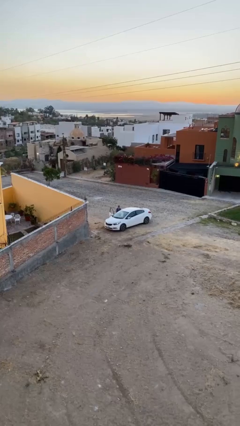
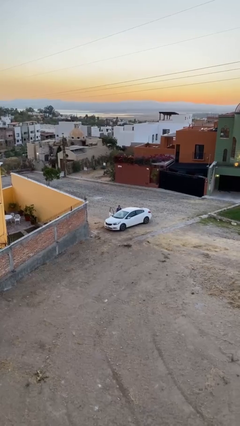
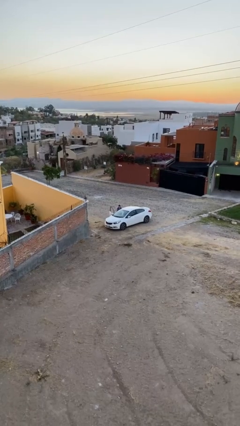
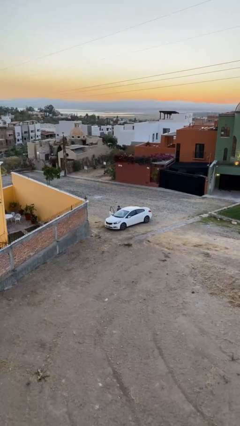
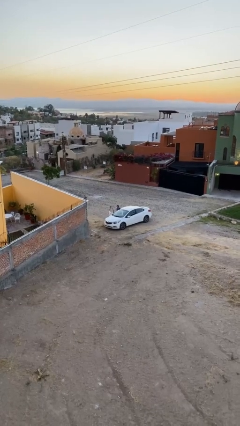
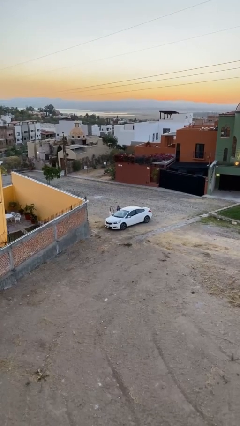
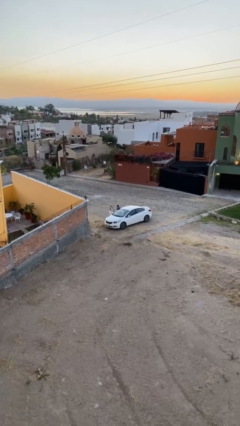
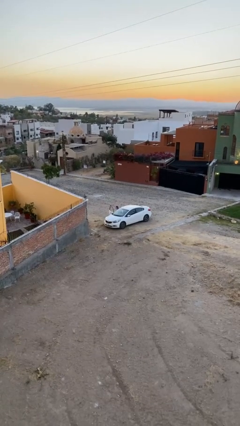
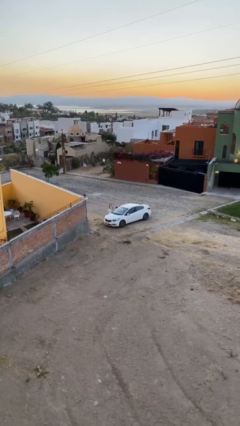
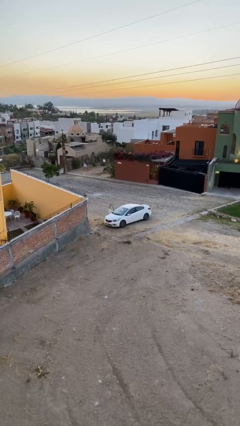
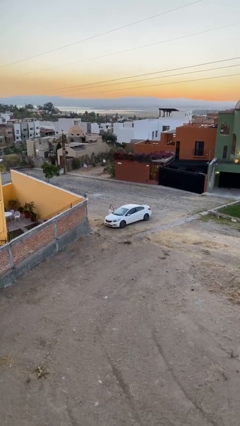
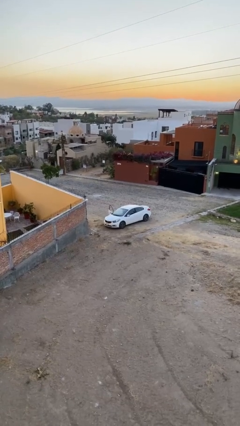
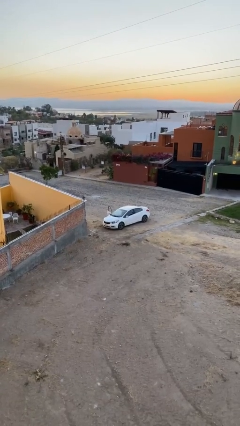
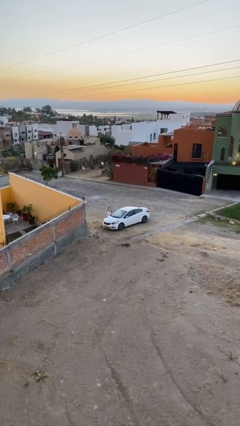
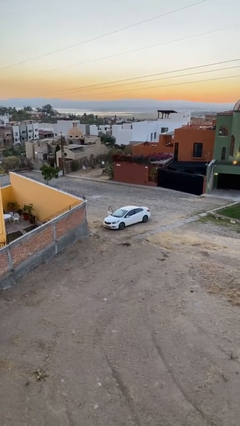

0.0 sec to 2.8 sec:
person enters car

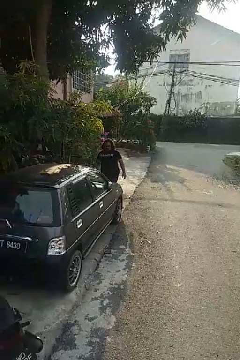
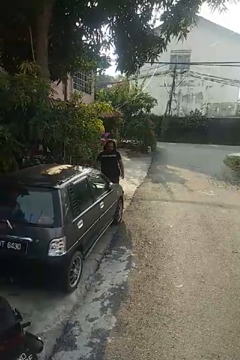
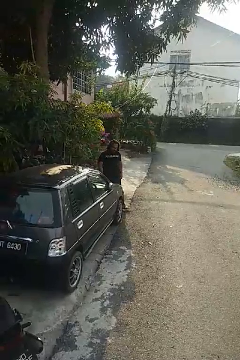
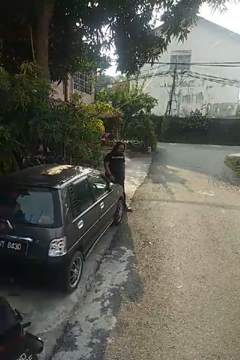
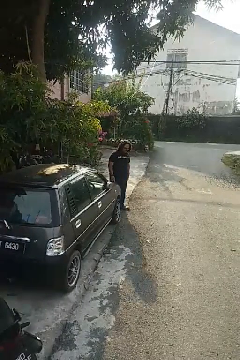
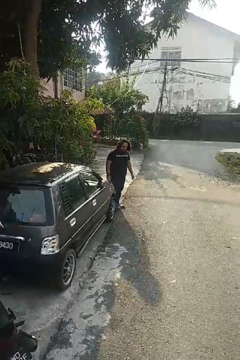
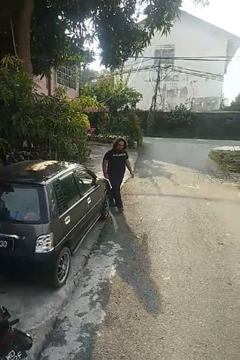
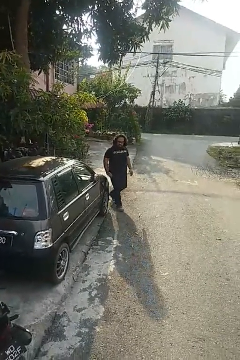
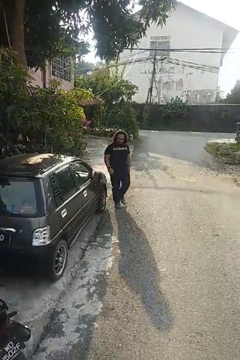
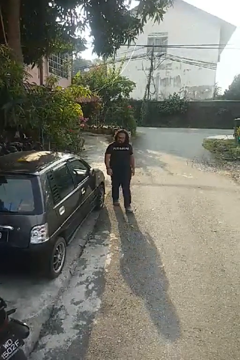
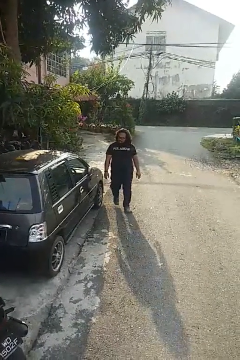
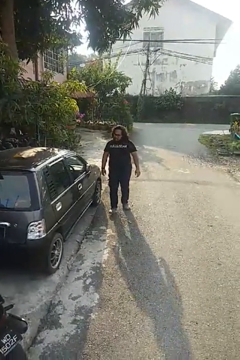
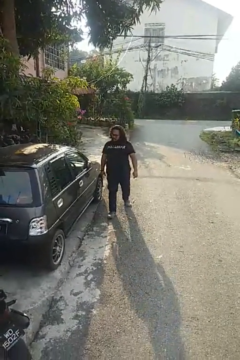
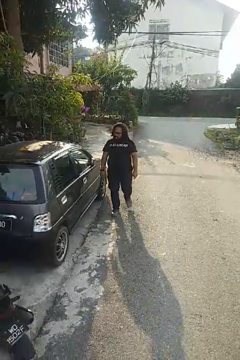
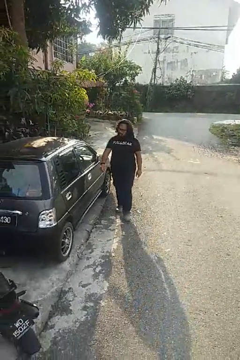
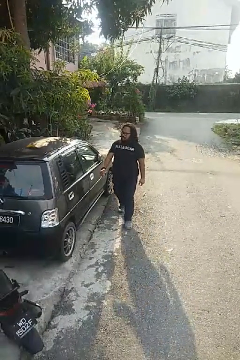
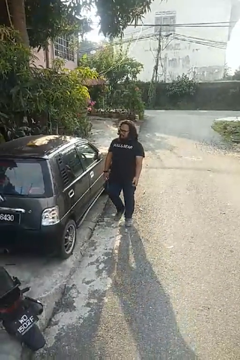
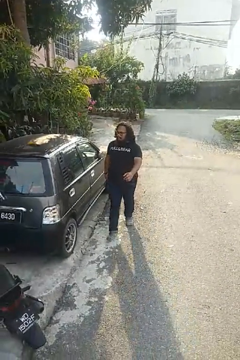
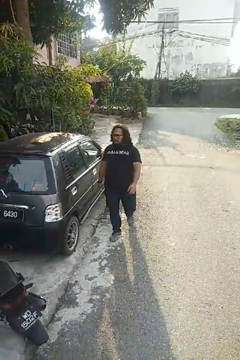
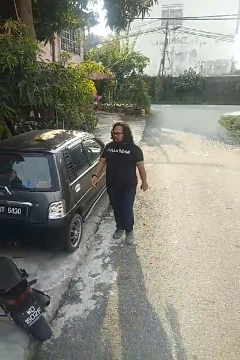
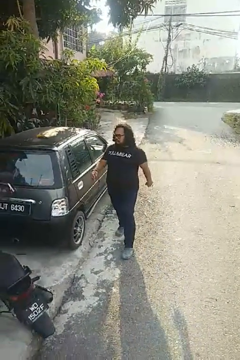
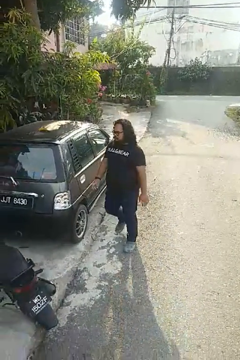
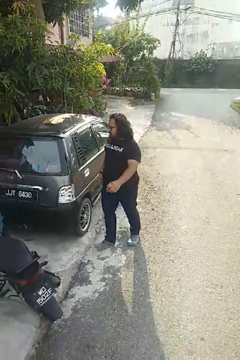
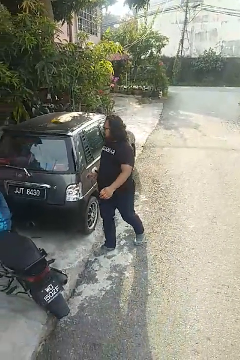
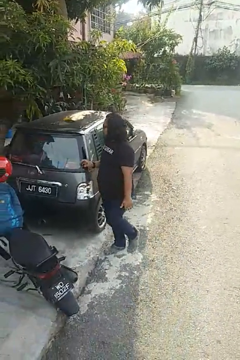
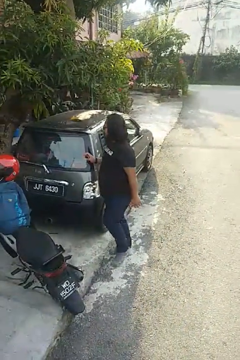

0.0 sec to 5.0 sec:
person walks around car

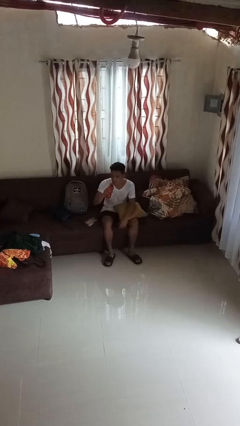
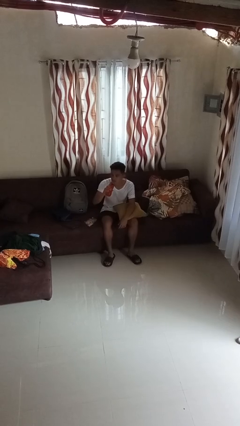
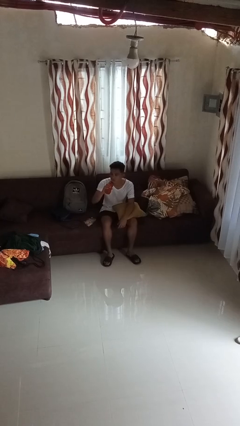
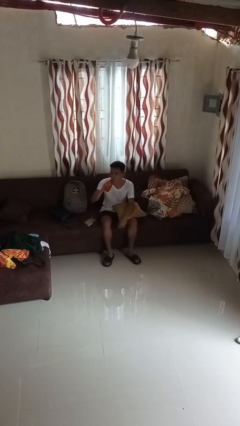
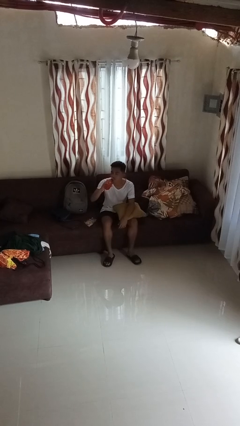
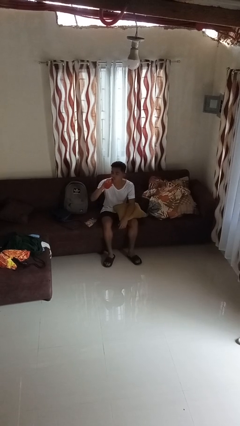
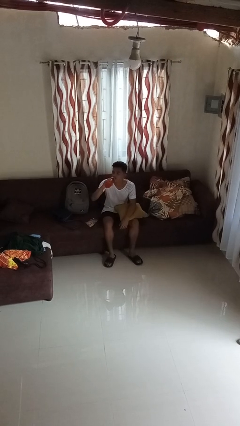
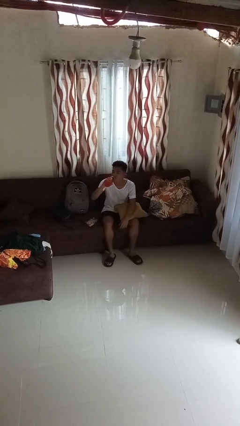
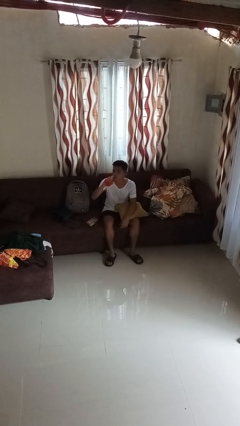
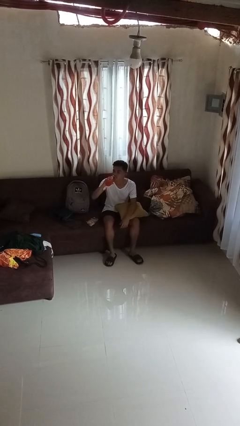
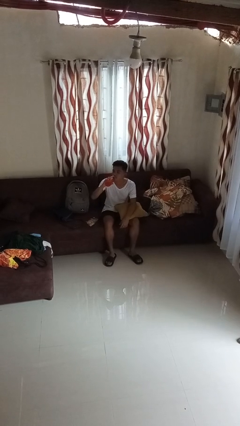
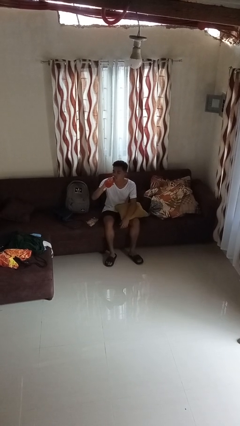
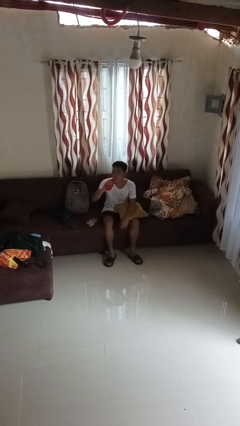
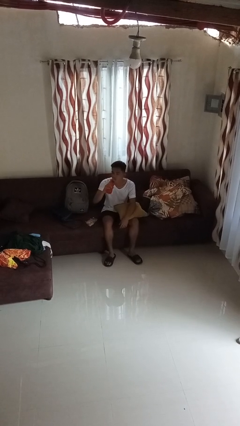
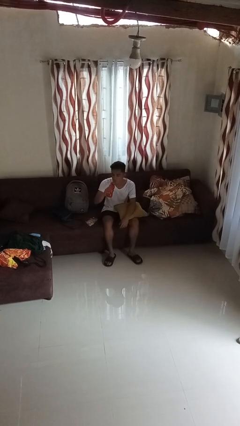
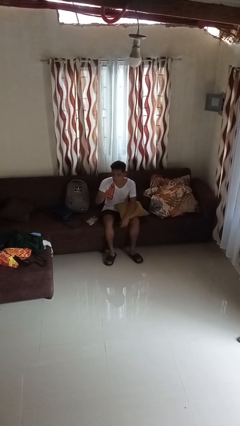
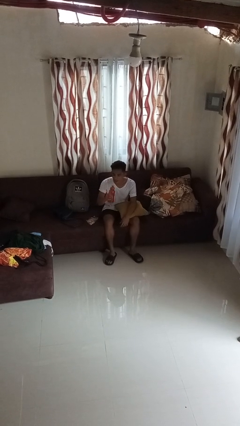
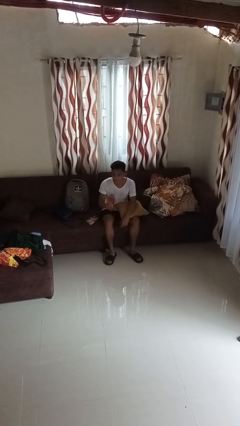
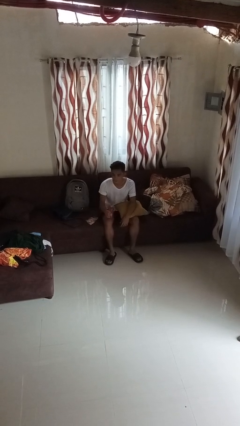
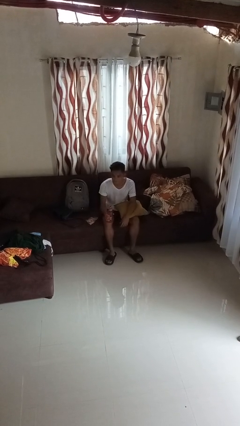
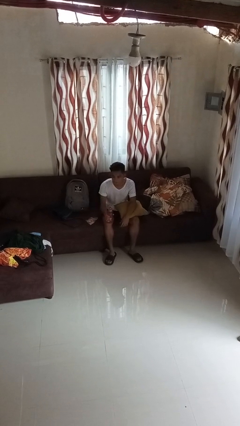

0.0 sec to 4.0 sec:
person drinks from bottle

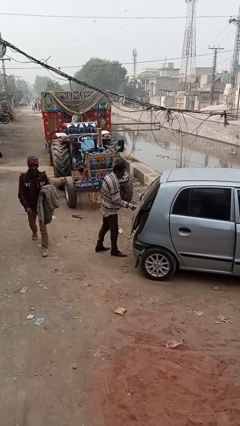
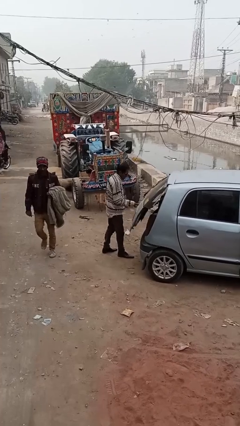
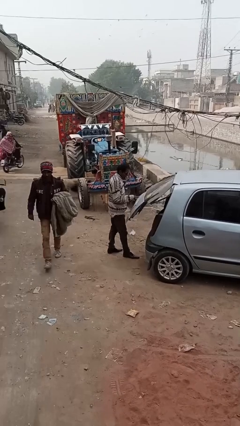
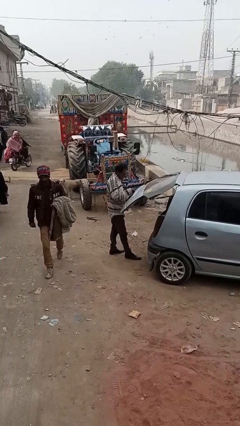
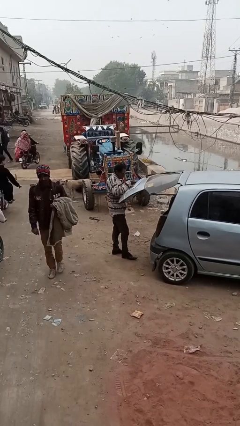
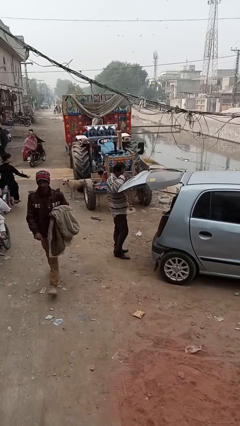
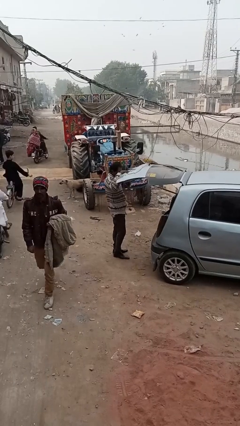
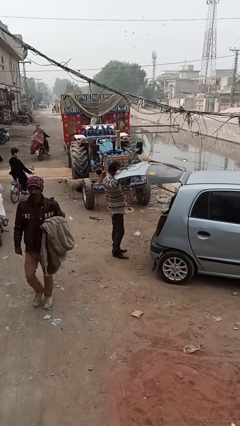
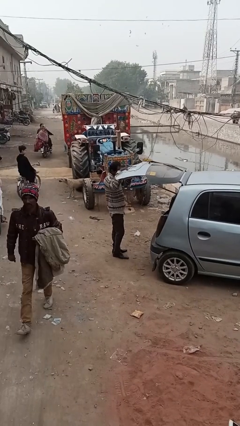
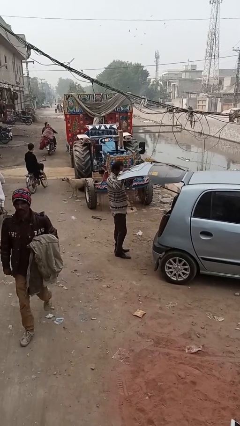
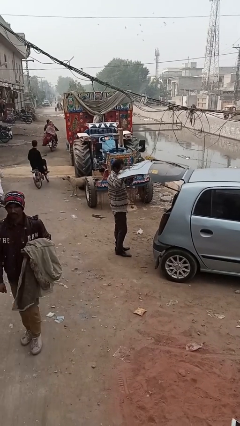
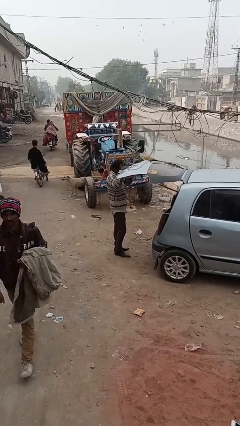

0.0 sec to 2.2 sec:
person opens car trunk

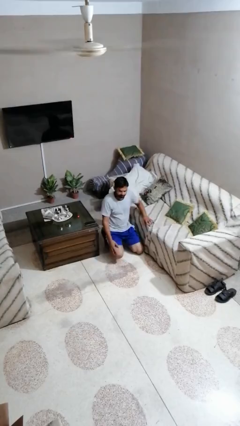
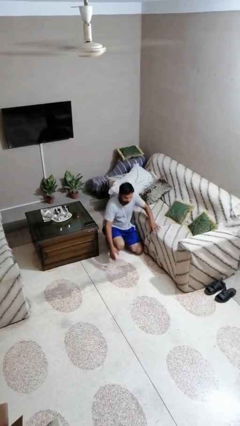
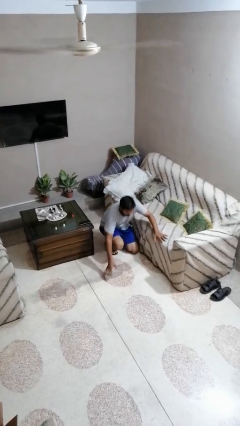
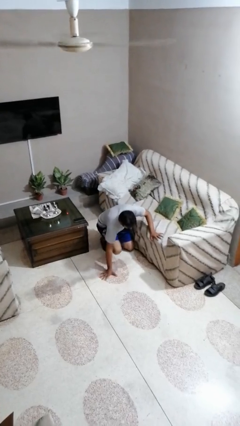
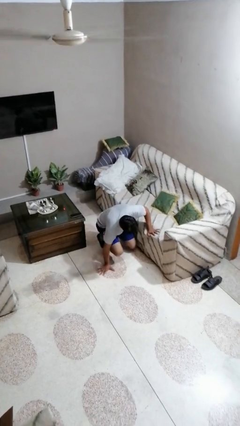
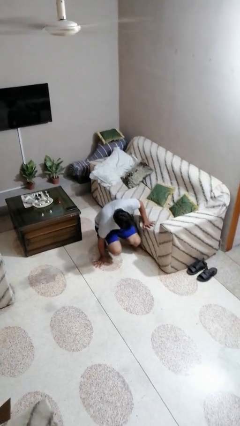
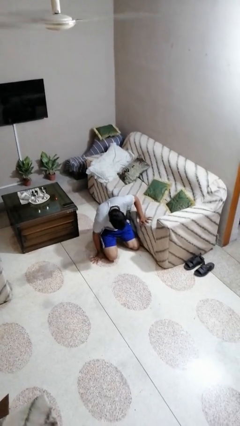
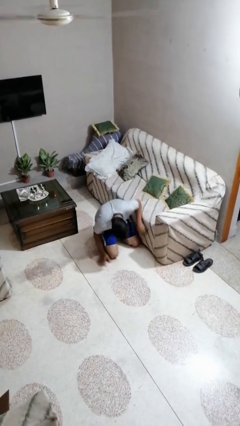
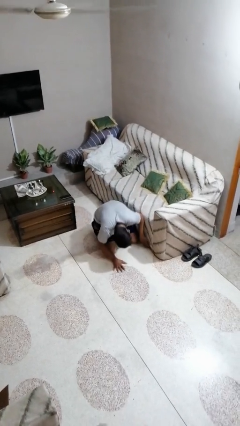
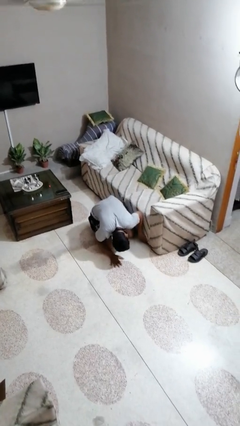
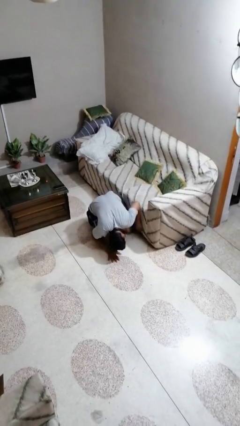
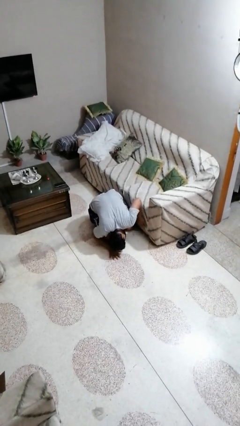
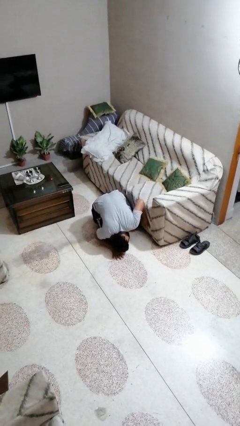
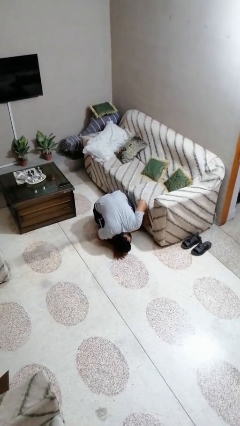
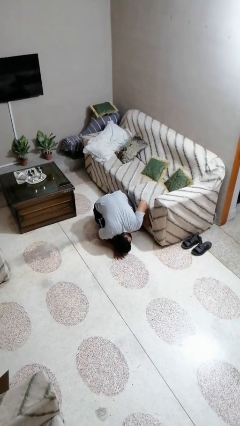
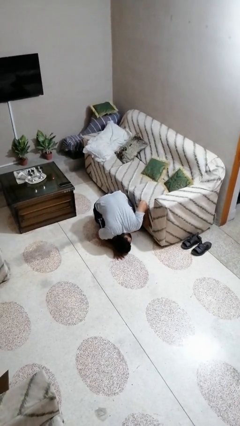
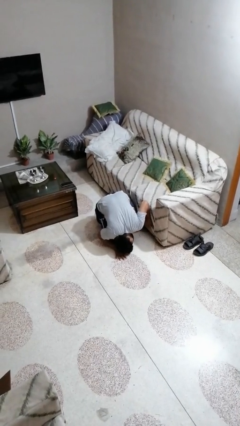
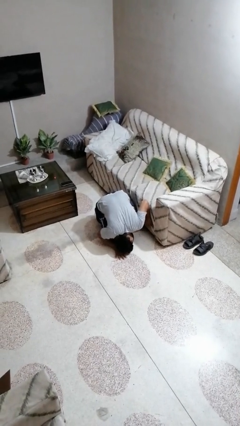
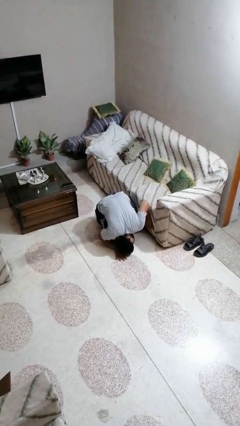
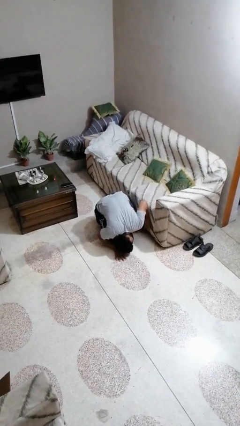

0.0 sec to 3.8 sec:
person searches under couch

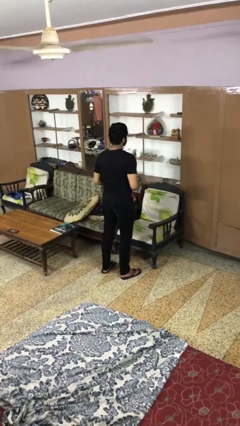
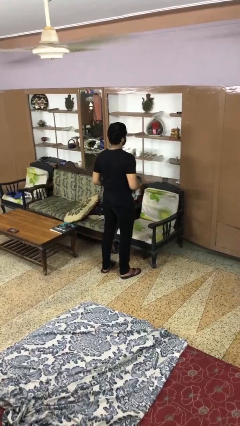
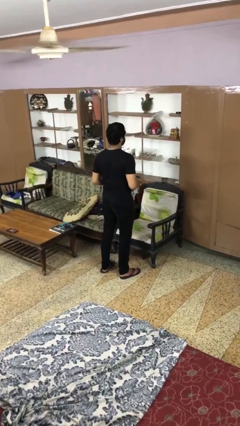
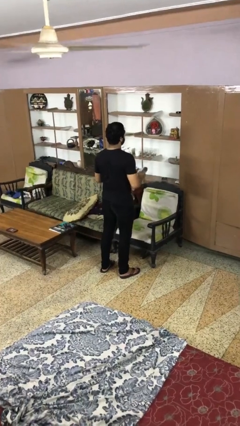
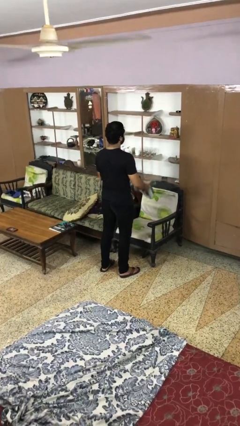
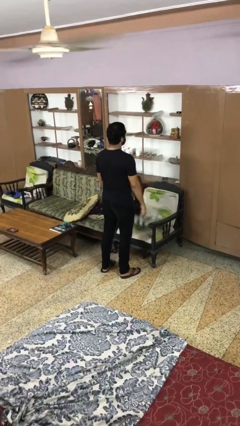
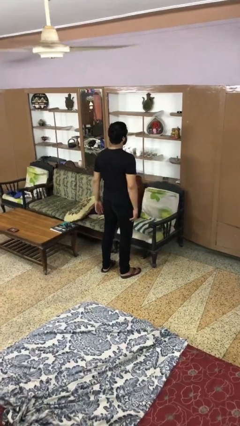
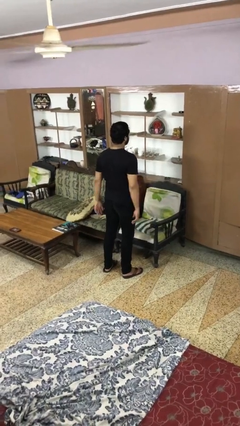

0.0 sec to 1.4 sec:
person puts down object on couch
